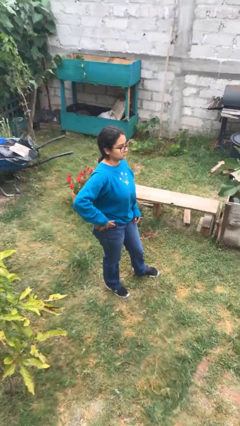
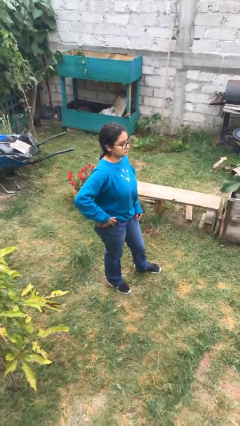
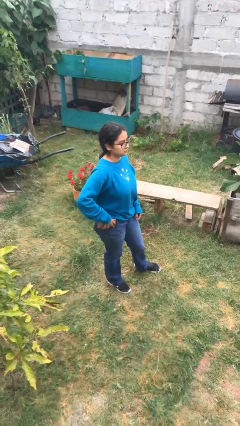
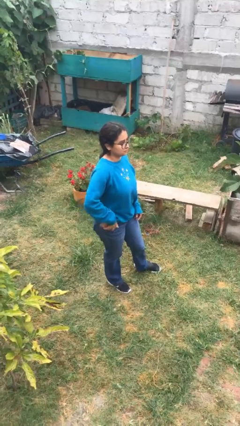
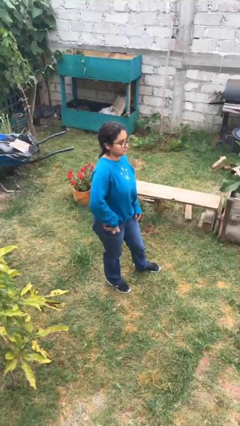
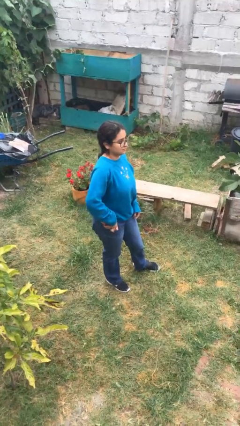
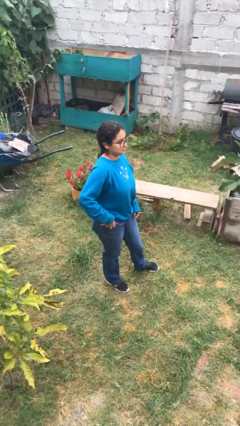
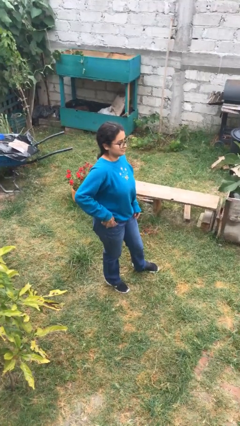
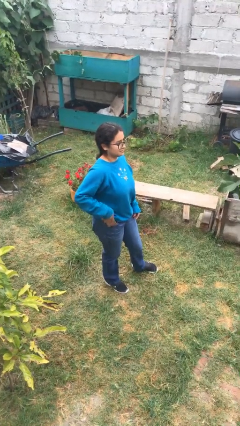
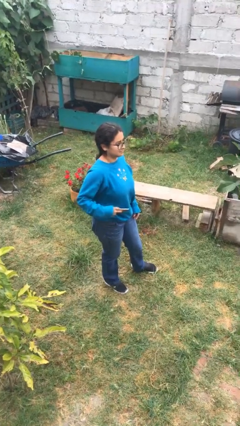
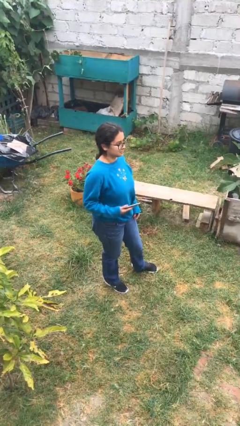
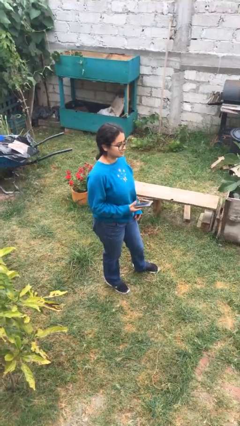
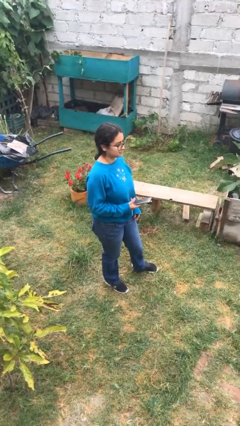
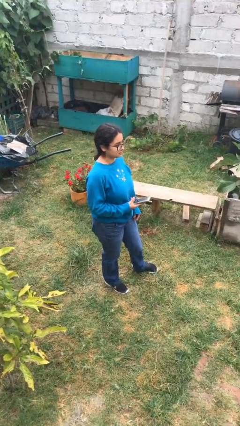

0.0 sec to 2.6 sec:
person takes phone from pocket

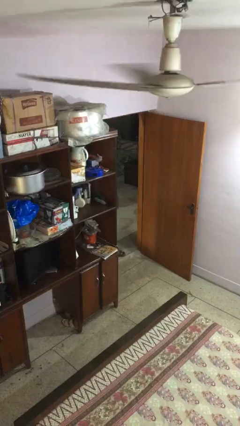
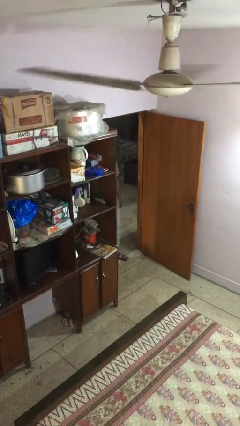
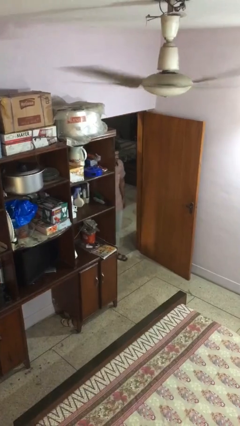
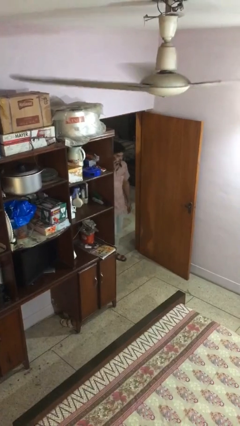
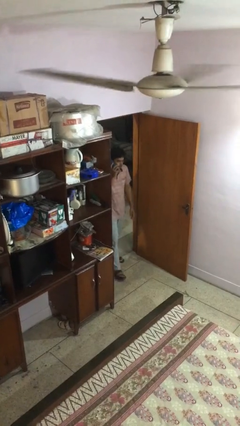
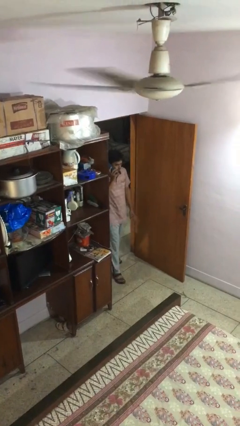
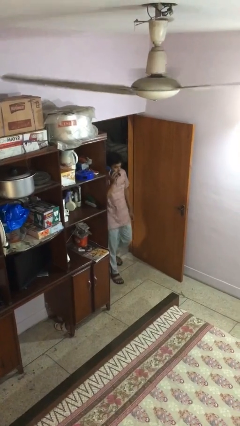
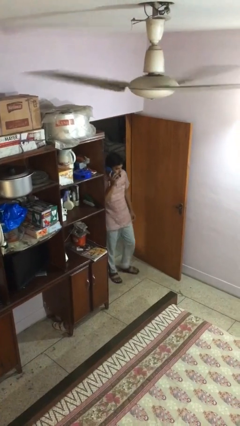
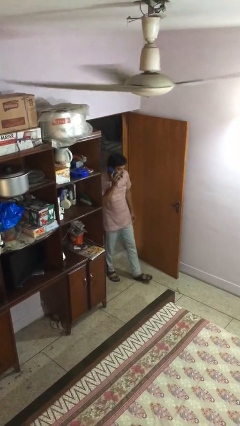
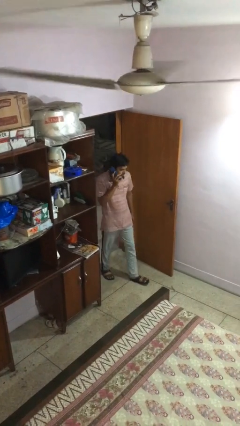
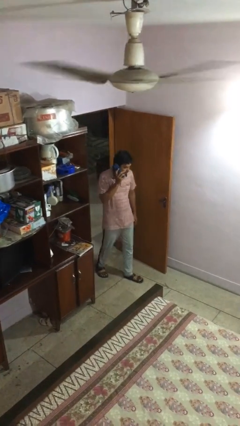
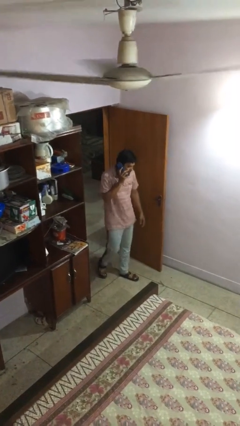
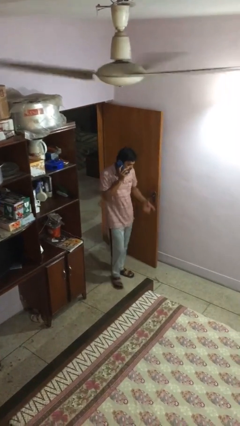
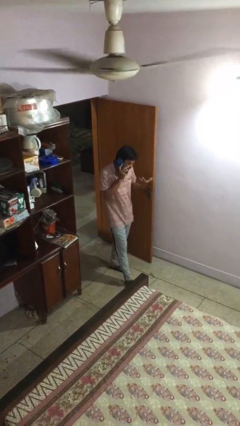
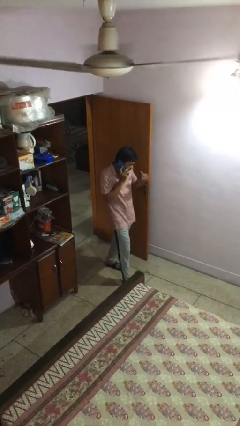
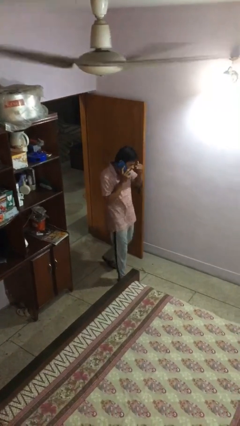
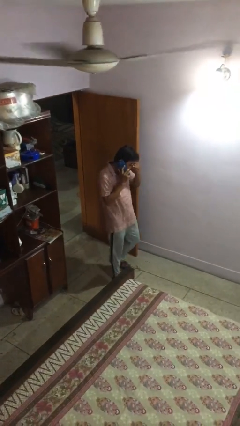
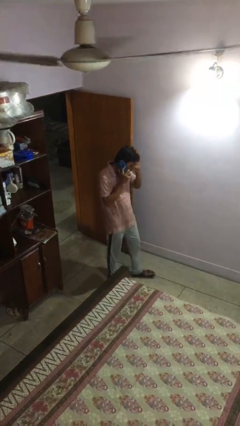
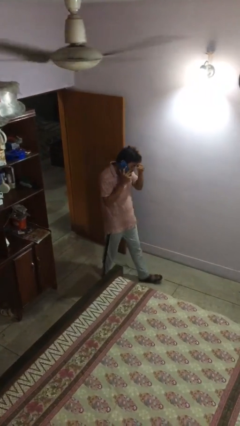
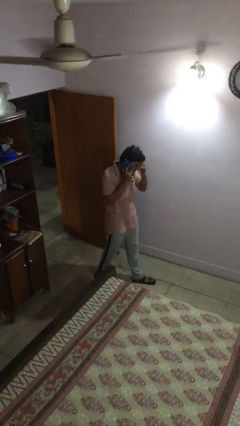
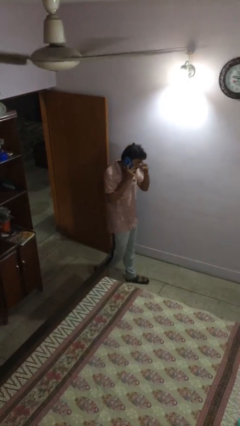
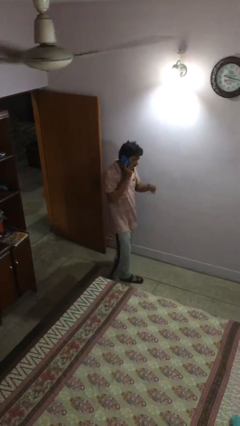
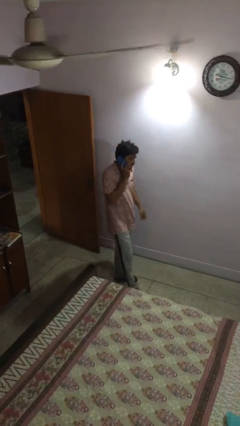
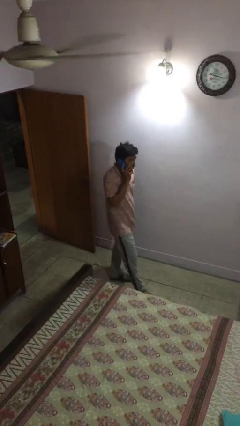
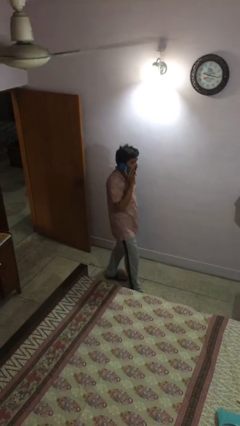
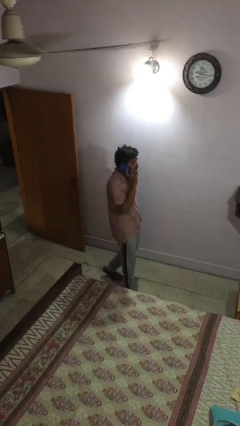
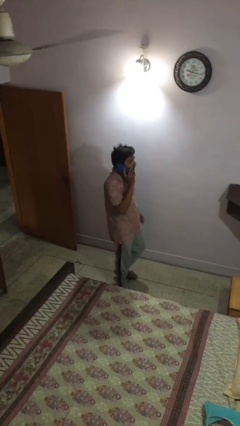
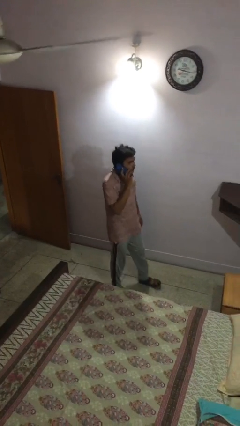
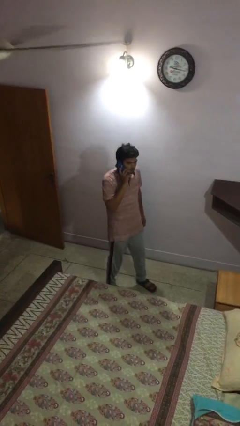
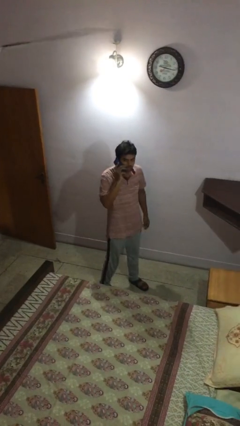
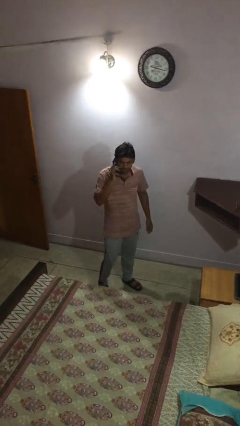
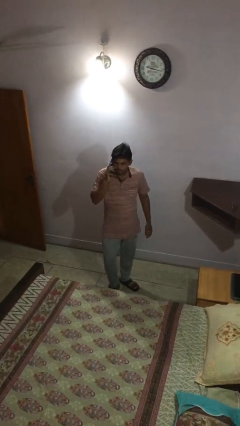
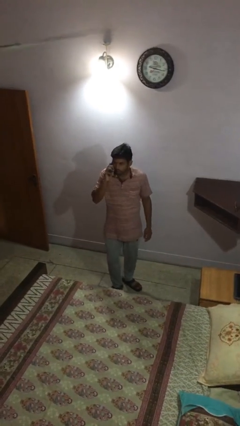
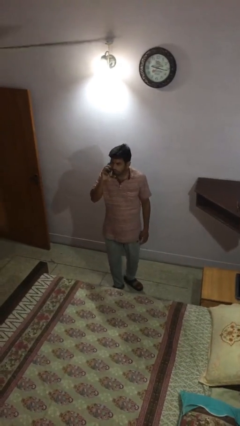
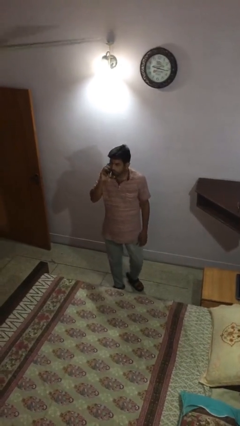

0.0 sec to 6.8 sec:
person enters scene through structure

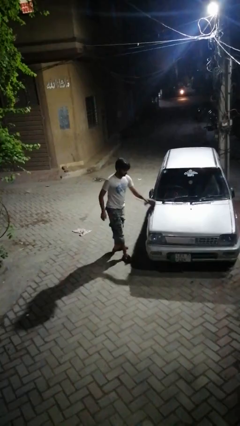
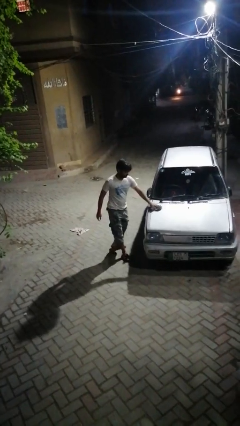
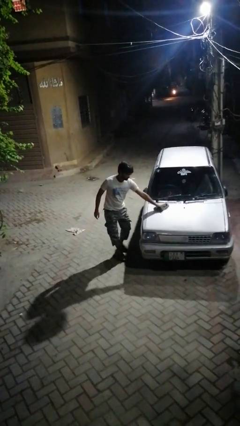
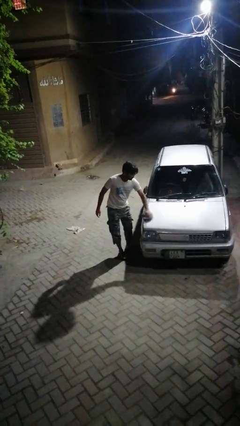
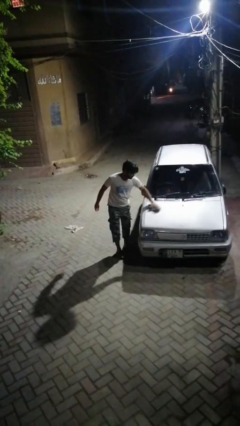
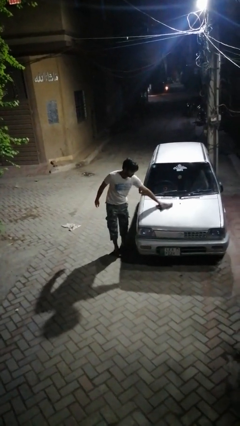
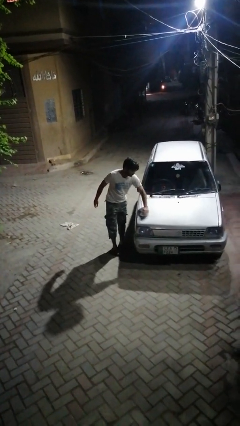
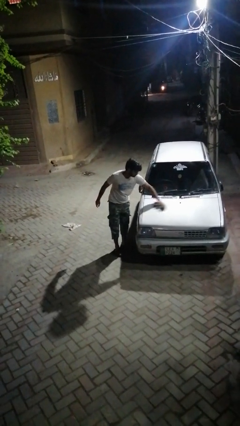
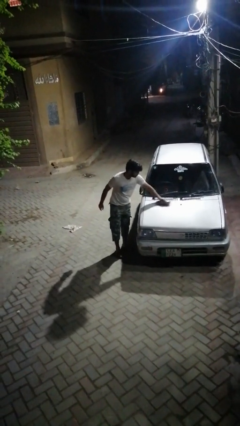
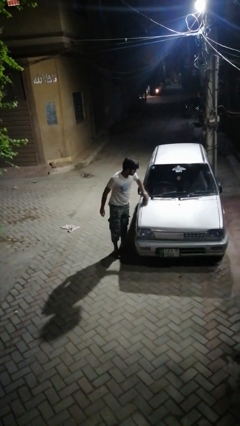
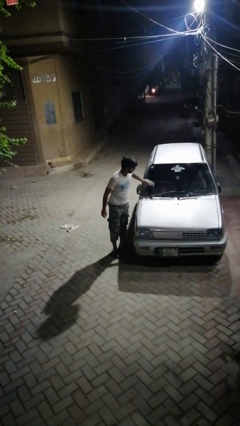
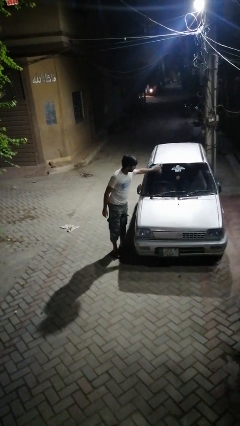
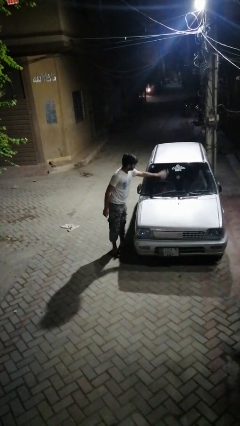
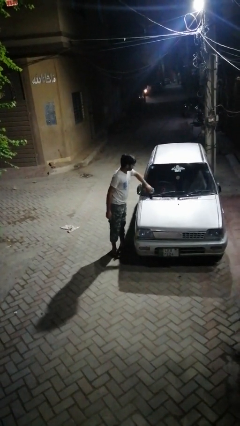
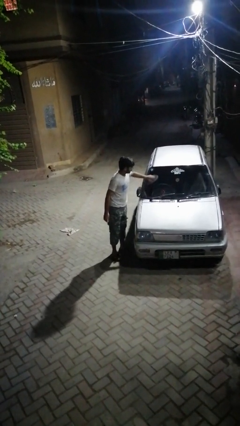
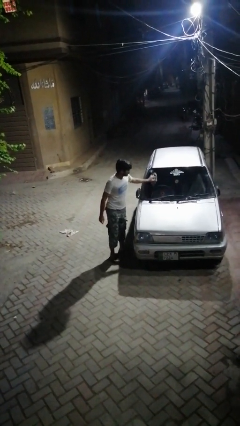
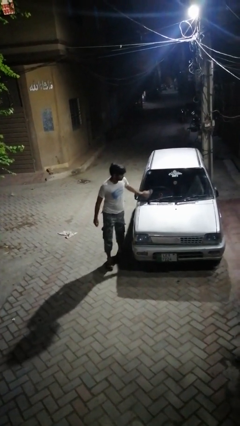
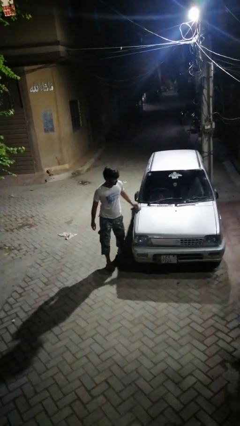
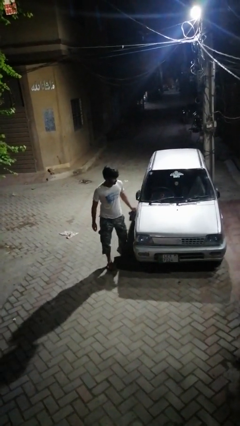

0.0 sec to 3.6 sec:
person polishes car with rag

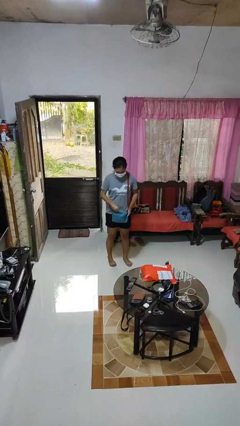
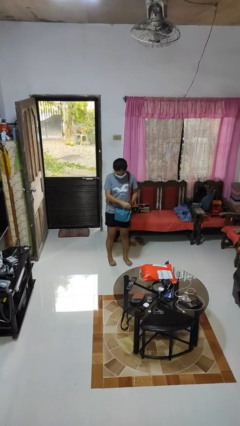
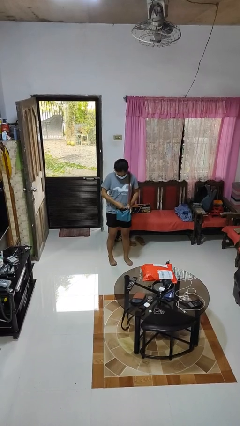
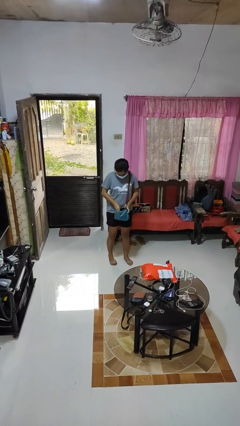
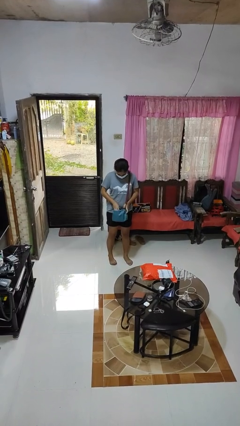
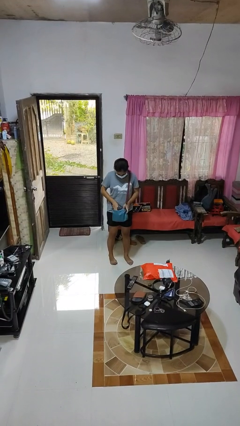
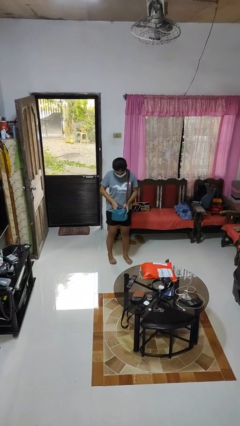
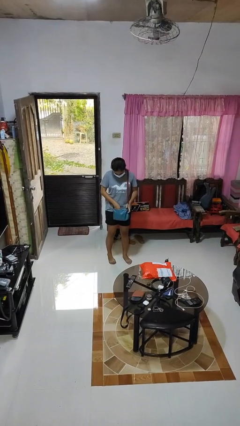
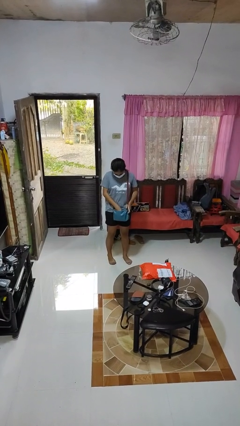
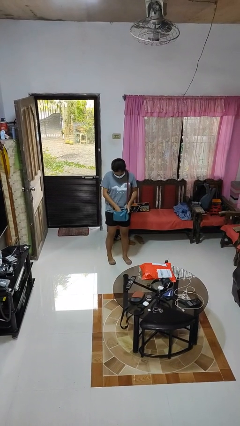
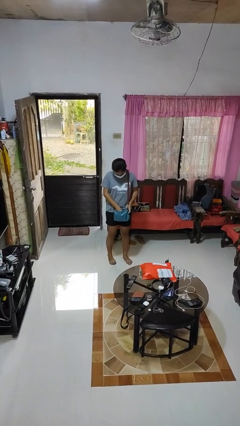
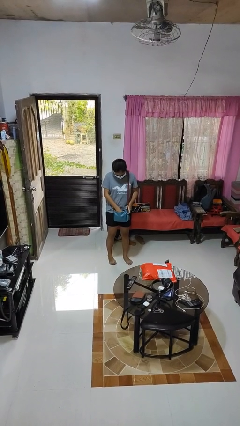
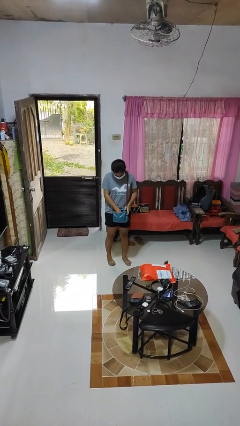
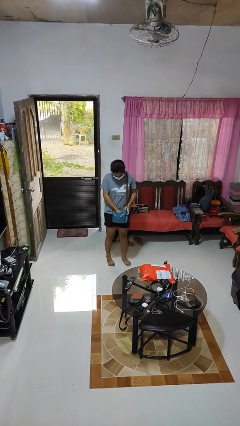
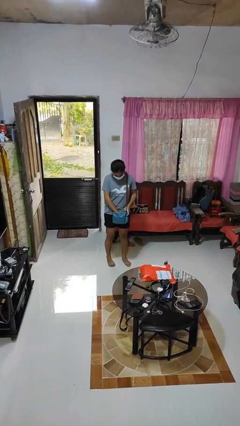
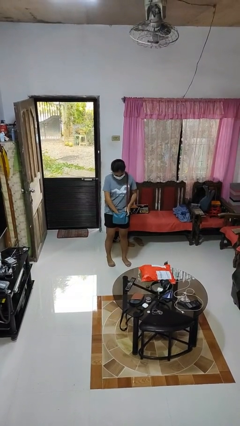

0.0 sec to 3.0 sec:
person searches in purse

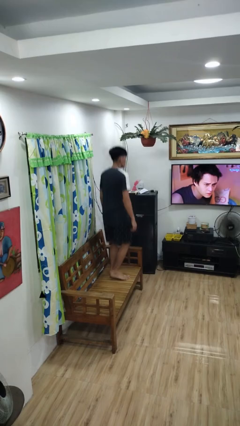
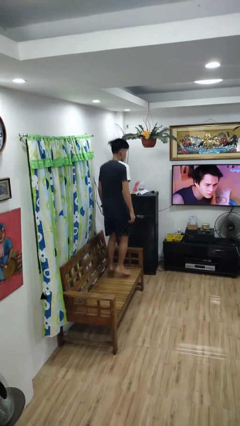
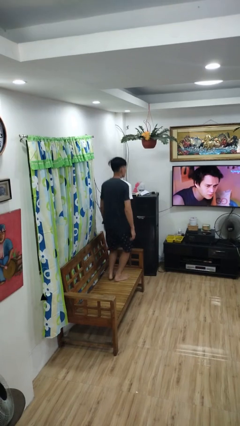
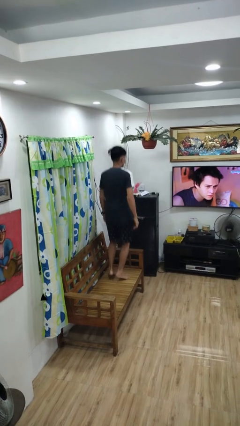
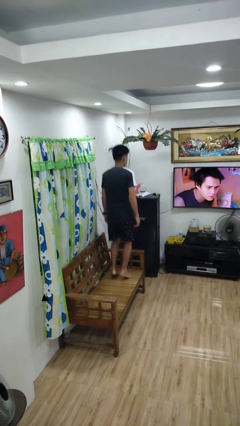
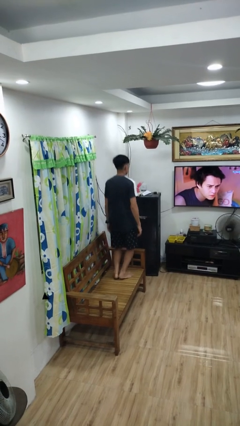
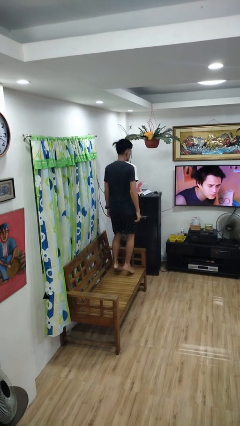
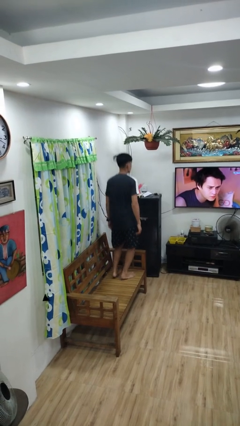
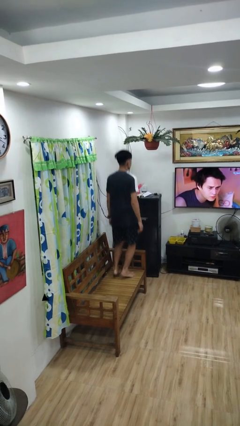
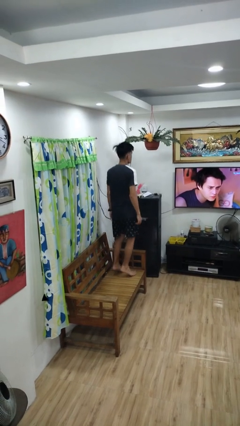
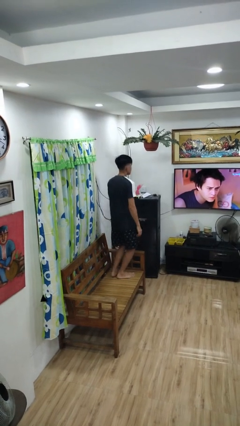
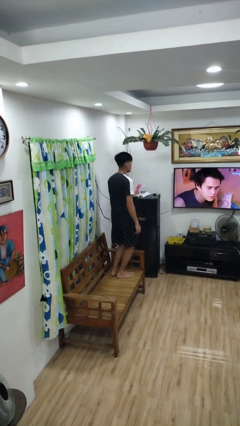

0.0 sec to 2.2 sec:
person jumps on couch
